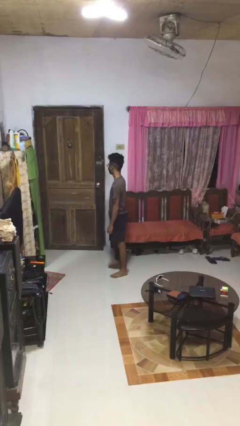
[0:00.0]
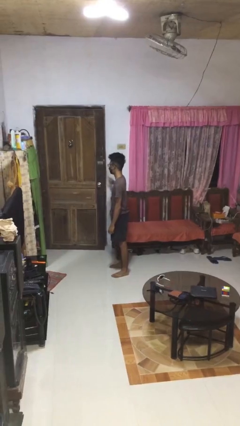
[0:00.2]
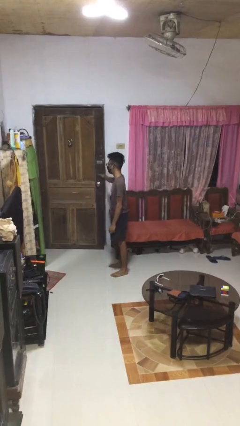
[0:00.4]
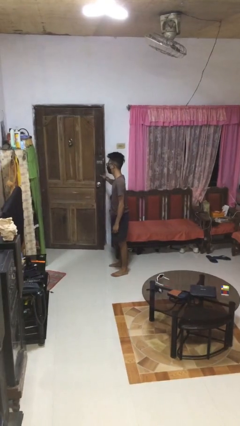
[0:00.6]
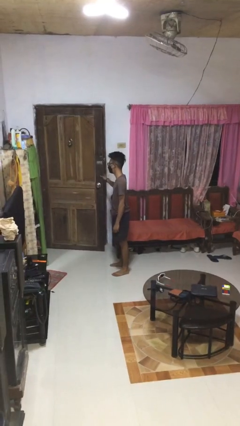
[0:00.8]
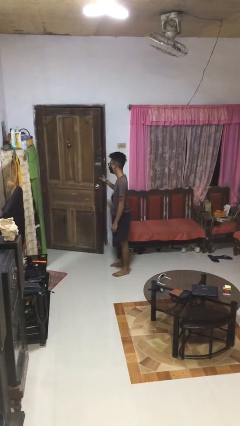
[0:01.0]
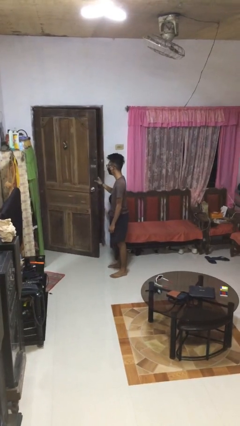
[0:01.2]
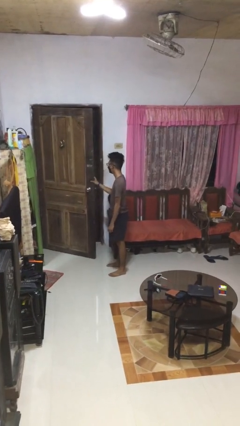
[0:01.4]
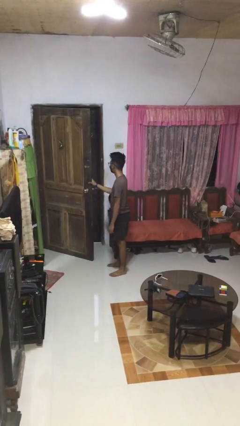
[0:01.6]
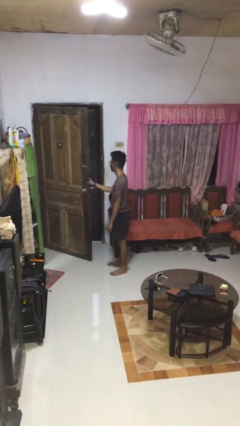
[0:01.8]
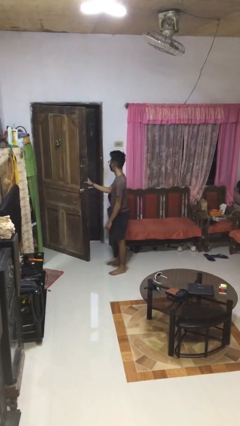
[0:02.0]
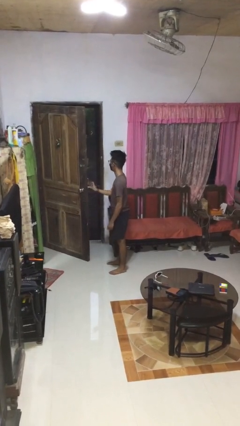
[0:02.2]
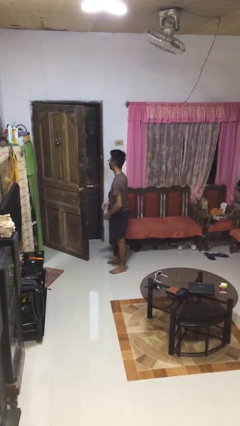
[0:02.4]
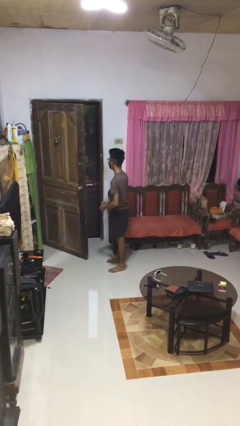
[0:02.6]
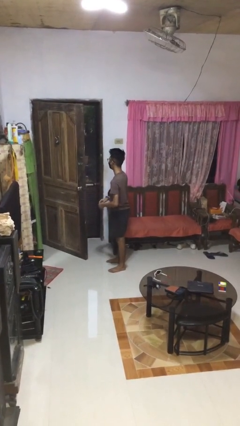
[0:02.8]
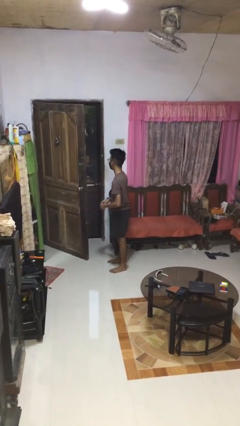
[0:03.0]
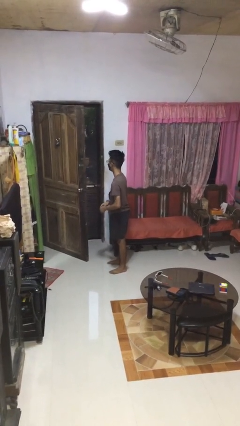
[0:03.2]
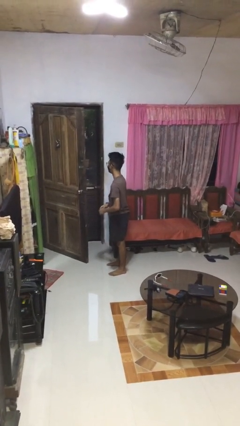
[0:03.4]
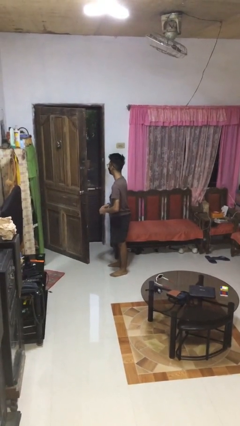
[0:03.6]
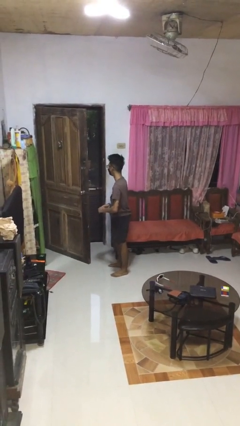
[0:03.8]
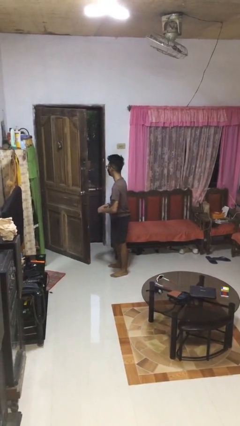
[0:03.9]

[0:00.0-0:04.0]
person opens facility door

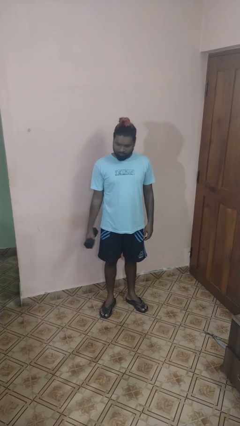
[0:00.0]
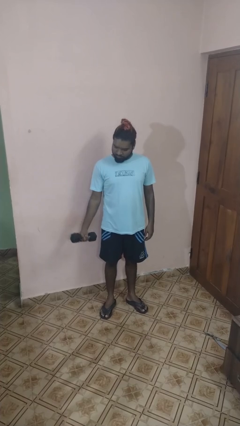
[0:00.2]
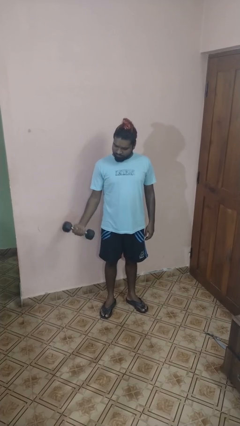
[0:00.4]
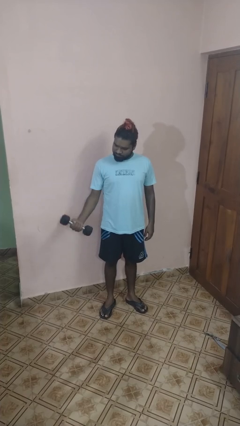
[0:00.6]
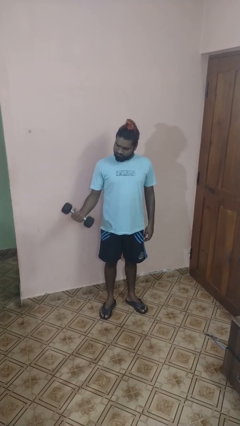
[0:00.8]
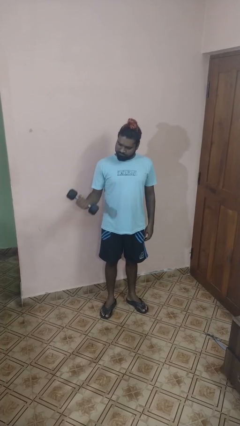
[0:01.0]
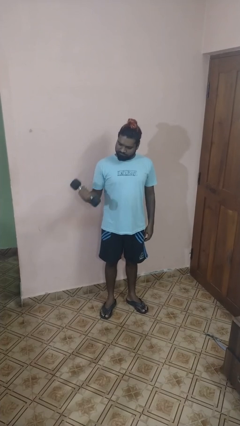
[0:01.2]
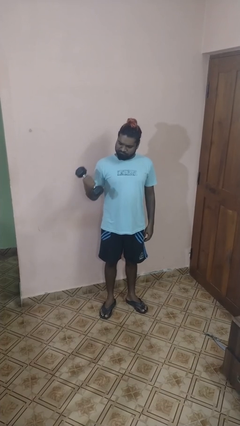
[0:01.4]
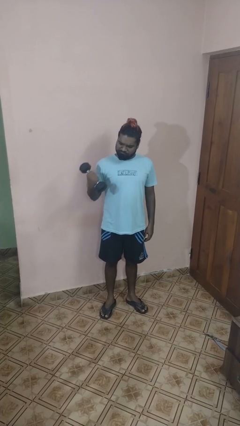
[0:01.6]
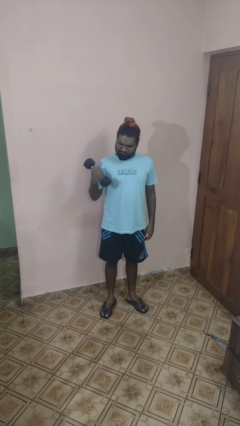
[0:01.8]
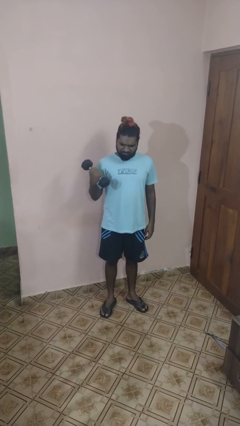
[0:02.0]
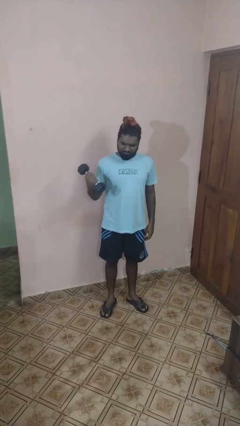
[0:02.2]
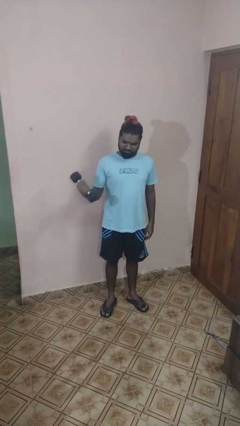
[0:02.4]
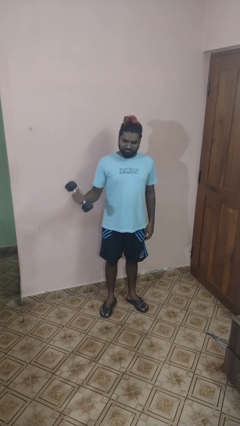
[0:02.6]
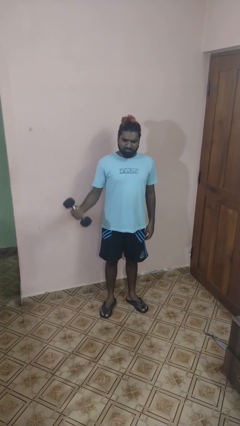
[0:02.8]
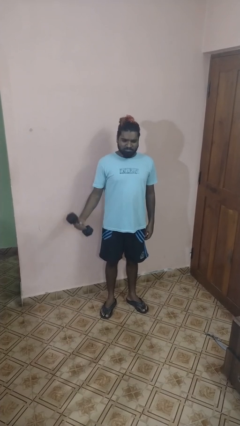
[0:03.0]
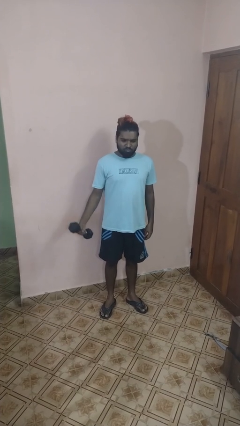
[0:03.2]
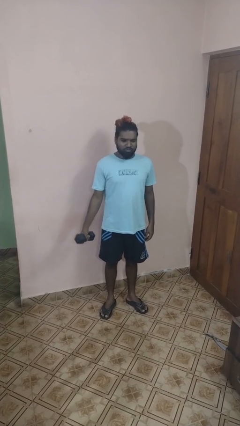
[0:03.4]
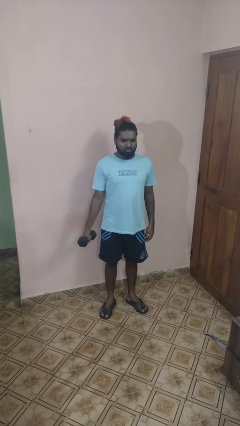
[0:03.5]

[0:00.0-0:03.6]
person lifts dumbbells

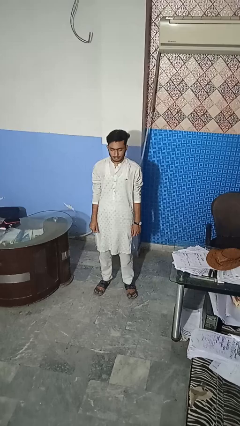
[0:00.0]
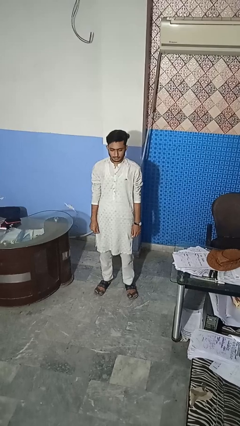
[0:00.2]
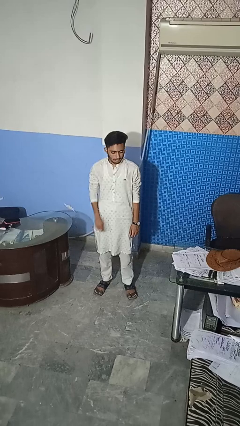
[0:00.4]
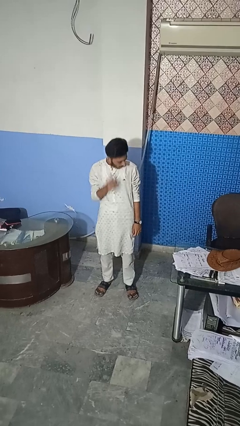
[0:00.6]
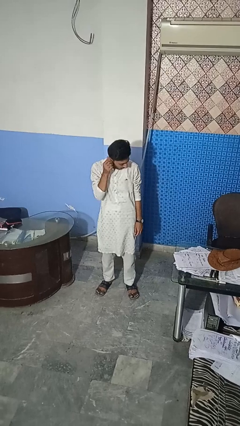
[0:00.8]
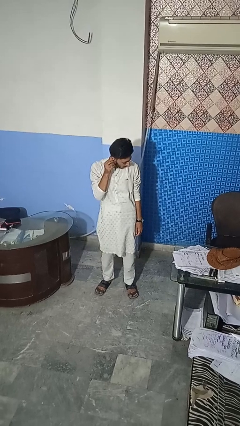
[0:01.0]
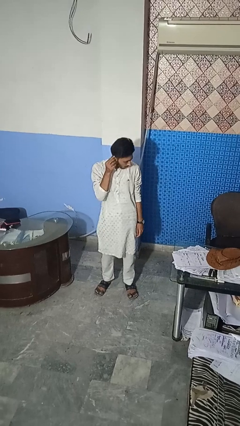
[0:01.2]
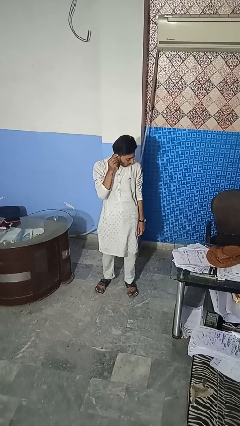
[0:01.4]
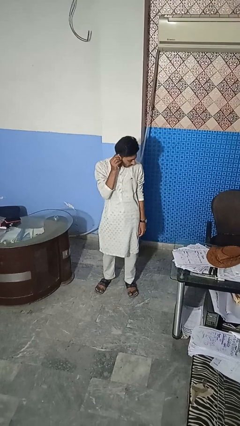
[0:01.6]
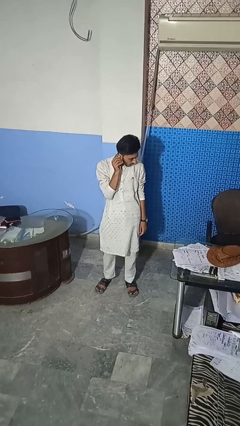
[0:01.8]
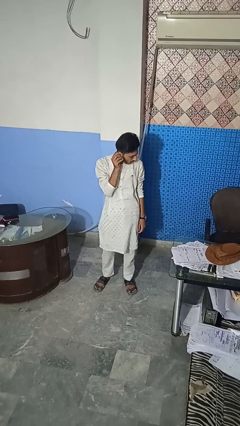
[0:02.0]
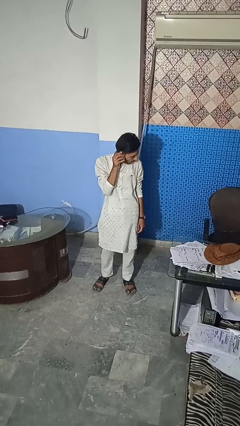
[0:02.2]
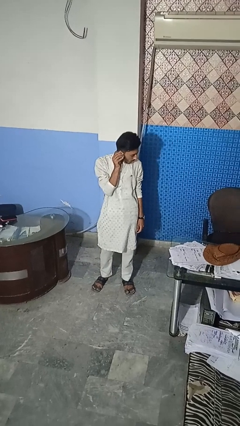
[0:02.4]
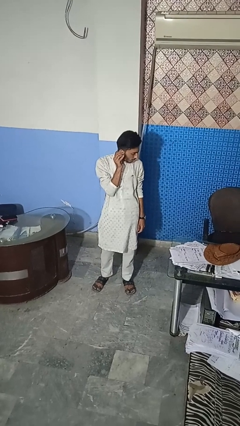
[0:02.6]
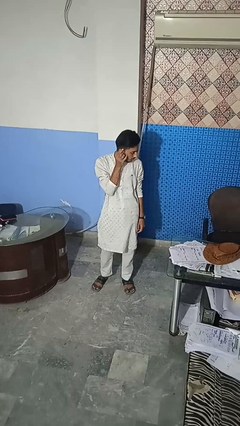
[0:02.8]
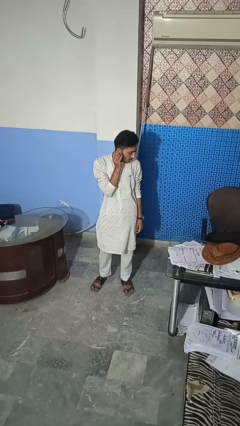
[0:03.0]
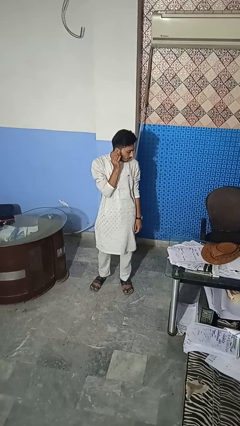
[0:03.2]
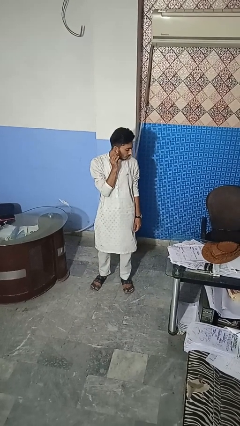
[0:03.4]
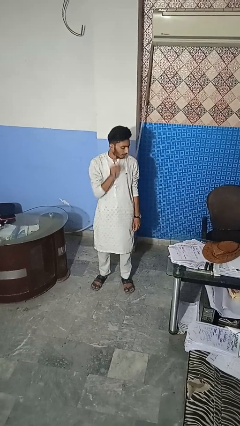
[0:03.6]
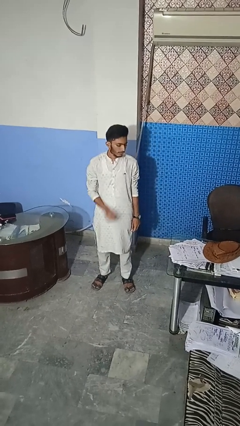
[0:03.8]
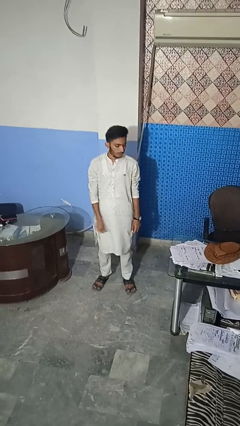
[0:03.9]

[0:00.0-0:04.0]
person touches earlobe

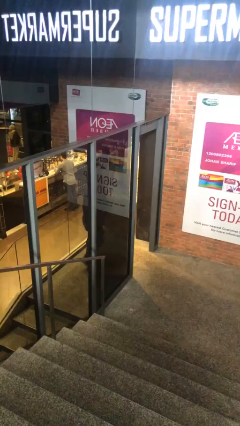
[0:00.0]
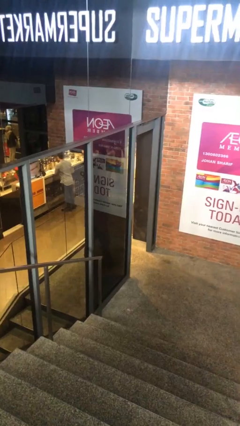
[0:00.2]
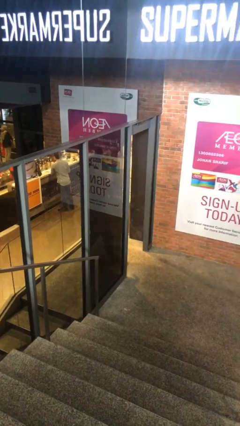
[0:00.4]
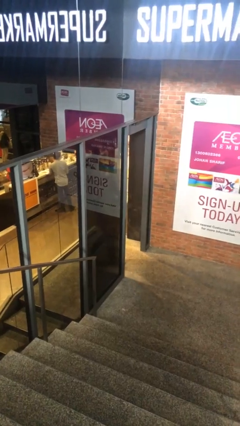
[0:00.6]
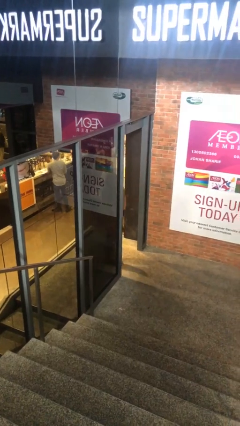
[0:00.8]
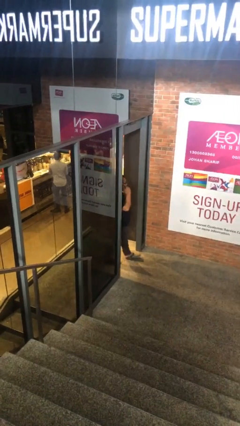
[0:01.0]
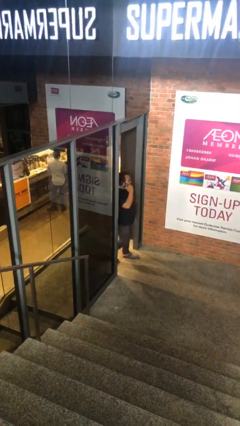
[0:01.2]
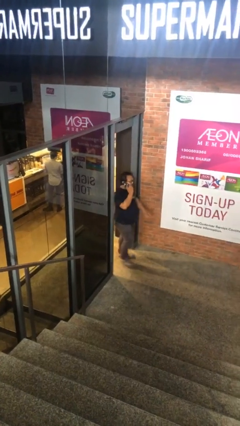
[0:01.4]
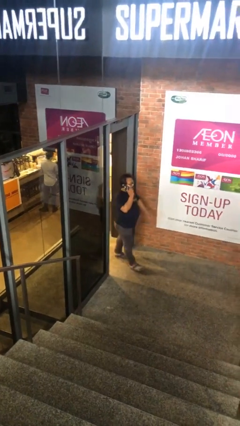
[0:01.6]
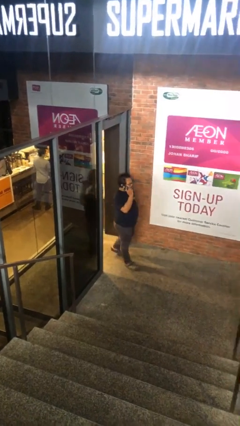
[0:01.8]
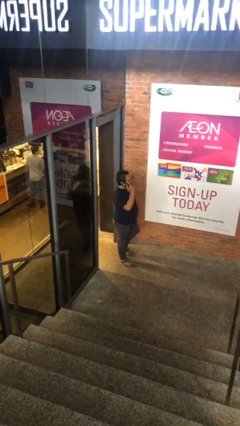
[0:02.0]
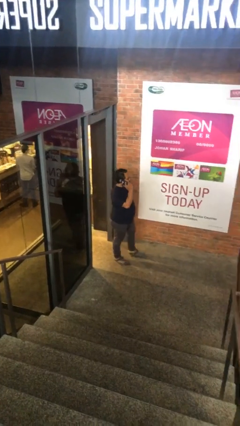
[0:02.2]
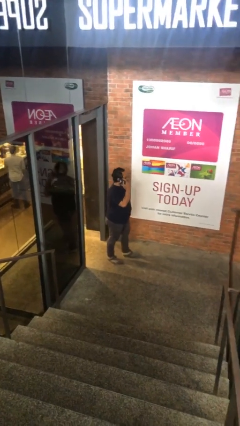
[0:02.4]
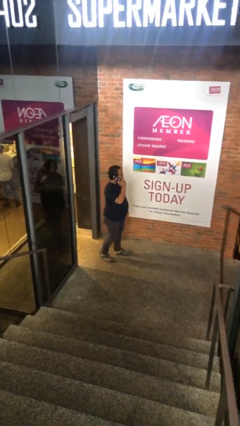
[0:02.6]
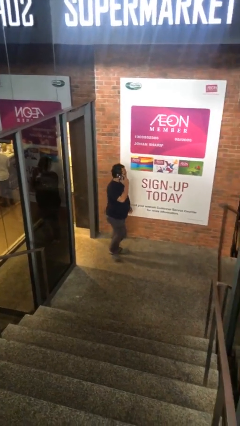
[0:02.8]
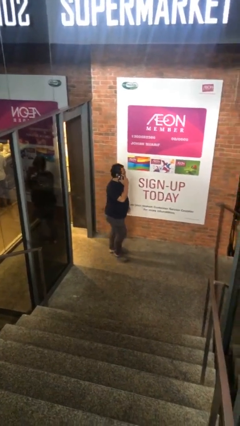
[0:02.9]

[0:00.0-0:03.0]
person enters scene through structure

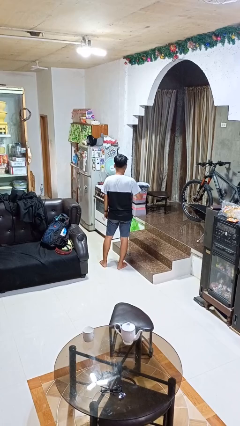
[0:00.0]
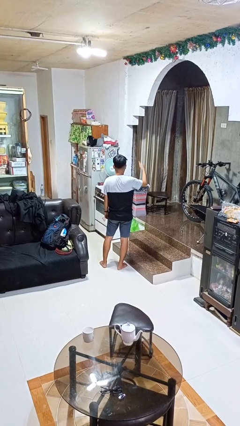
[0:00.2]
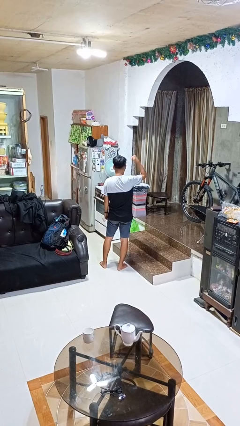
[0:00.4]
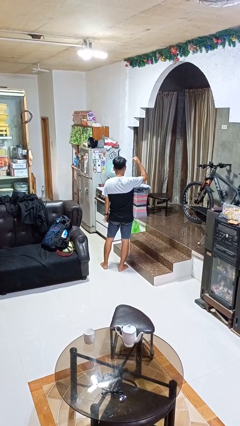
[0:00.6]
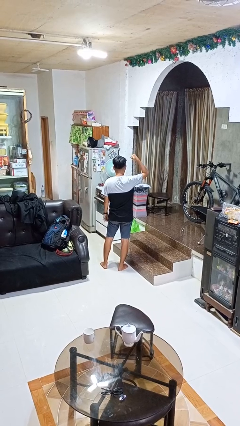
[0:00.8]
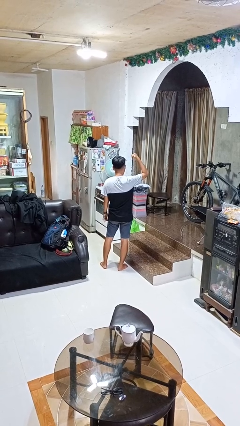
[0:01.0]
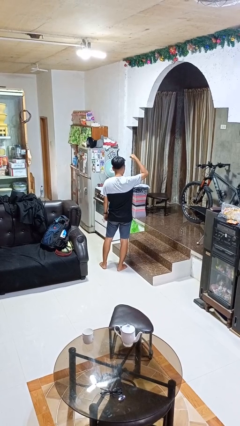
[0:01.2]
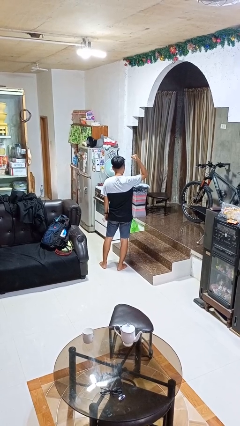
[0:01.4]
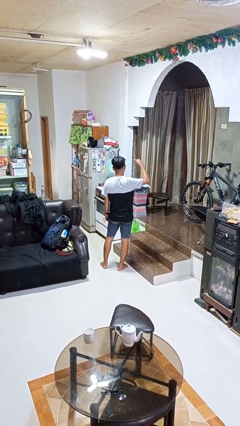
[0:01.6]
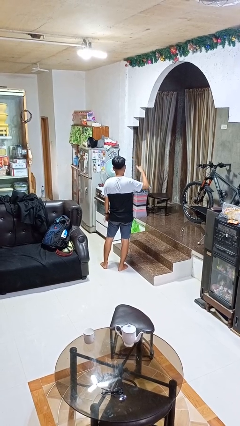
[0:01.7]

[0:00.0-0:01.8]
person gestures behind me

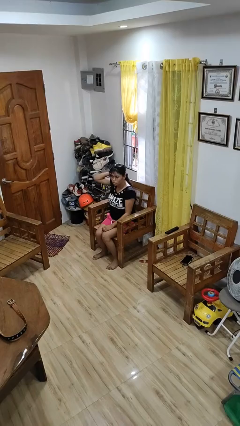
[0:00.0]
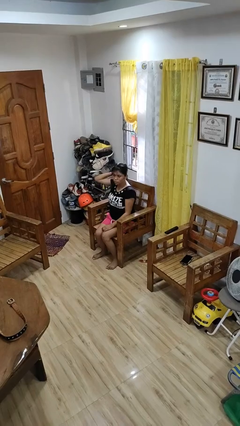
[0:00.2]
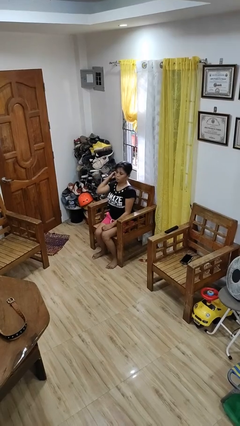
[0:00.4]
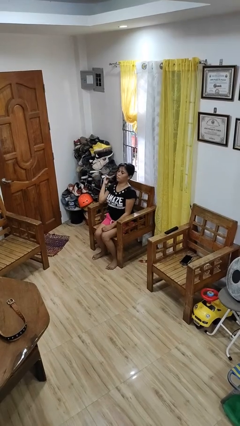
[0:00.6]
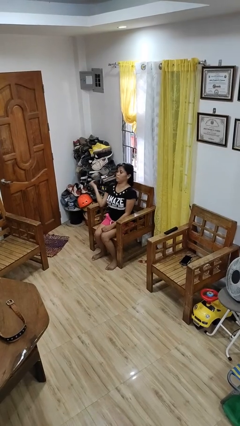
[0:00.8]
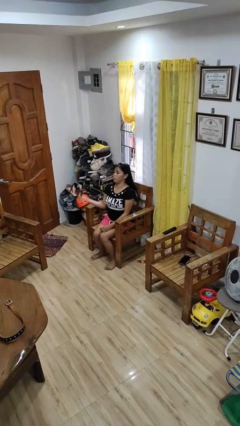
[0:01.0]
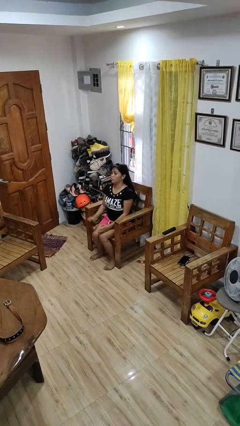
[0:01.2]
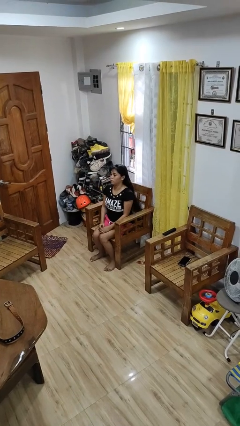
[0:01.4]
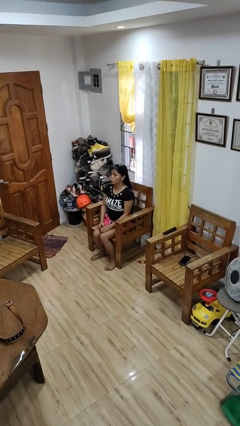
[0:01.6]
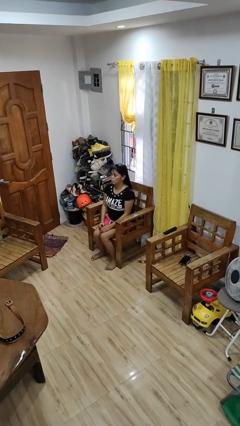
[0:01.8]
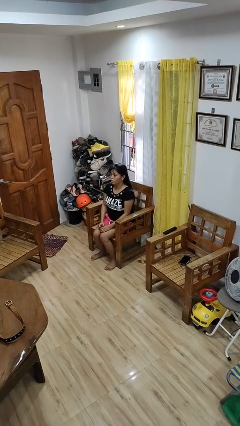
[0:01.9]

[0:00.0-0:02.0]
person takes off hairtie
